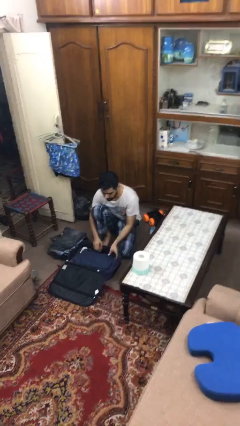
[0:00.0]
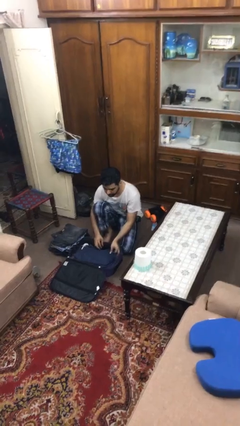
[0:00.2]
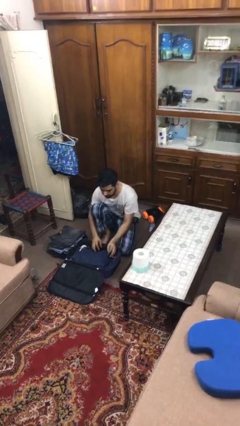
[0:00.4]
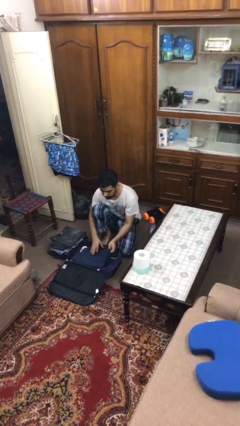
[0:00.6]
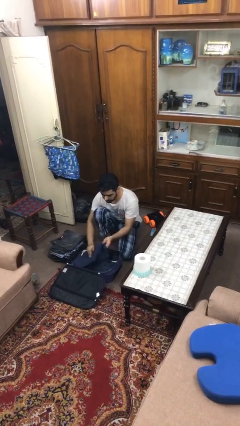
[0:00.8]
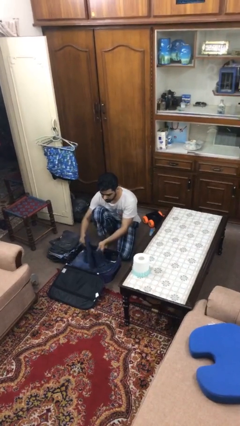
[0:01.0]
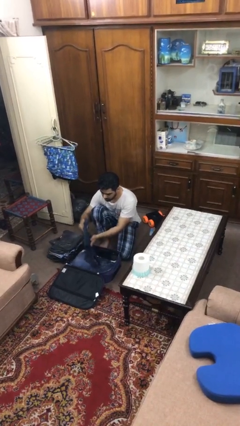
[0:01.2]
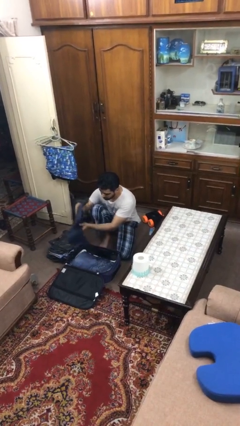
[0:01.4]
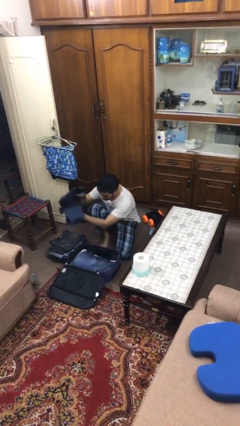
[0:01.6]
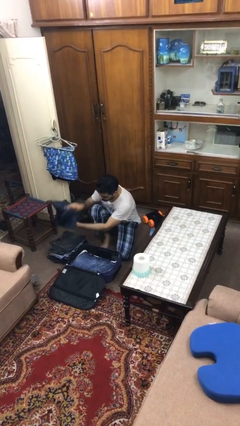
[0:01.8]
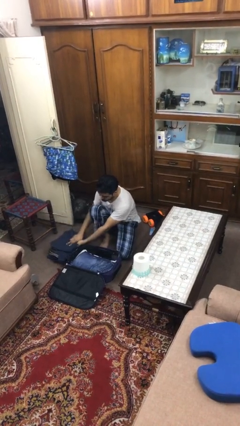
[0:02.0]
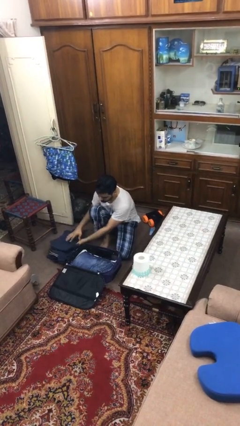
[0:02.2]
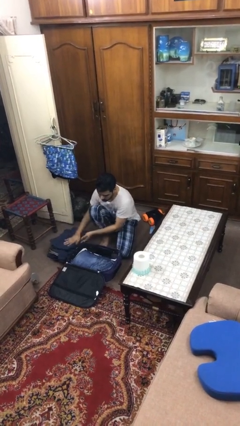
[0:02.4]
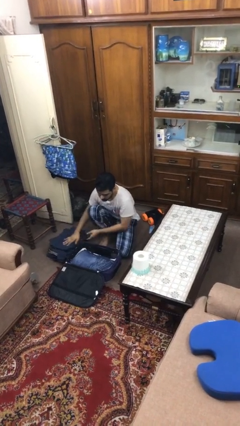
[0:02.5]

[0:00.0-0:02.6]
person unloads clothes from suitcase

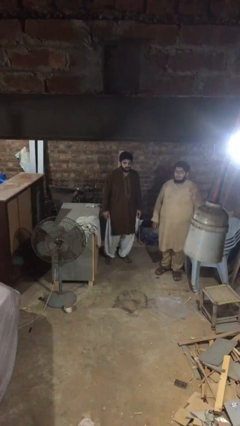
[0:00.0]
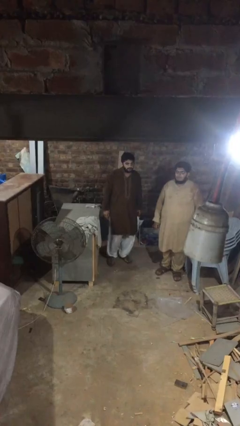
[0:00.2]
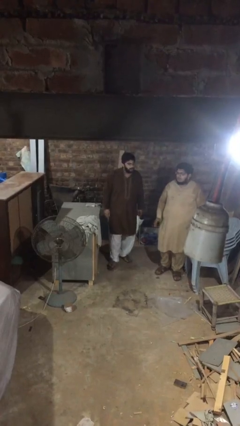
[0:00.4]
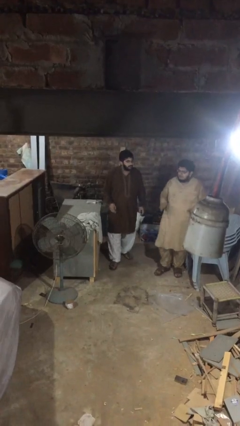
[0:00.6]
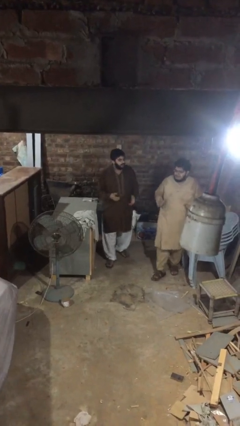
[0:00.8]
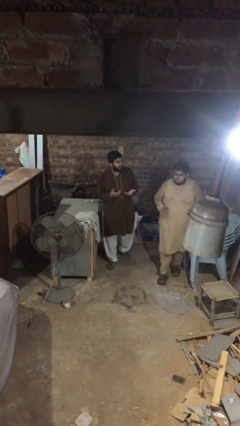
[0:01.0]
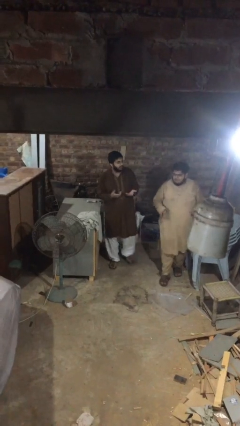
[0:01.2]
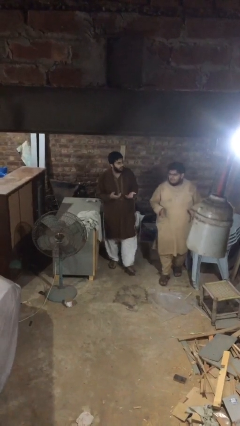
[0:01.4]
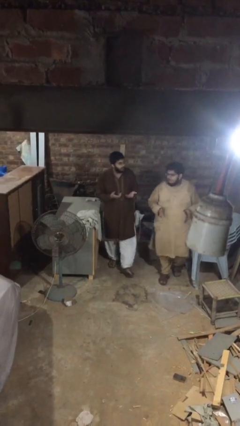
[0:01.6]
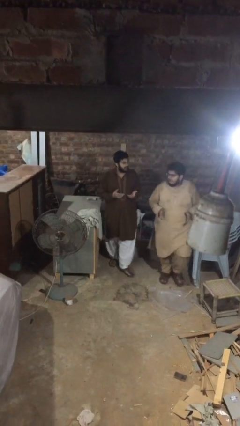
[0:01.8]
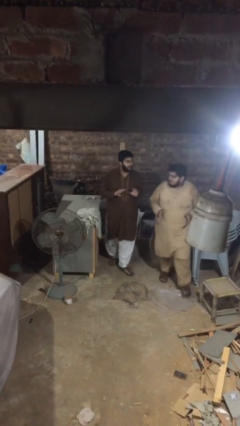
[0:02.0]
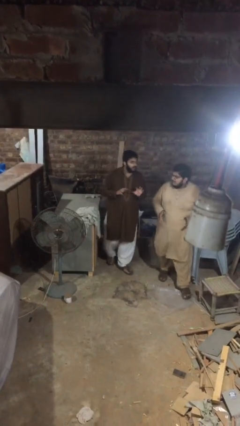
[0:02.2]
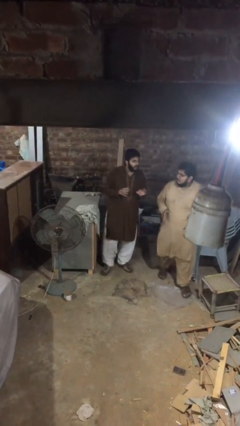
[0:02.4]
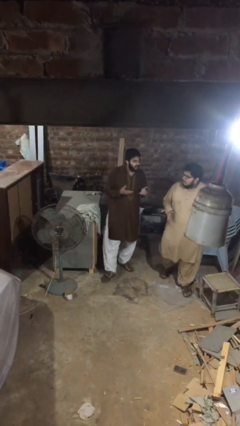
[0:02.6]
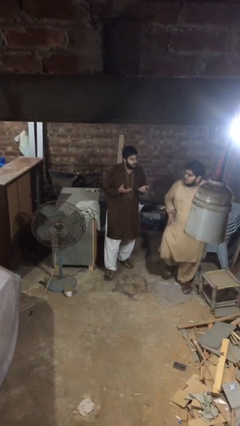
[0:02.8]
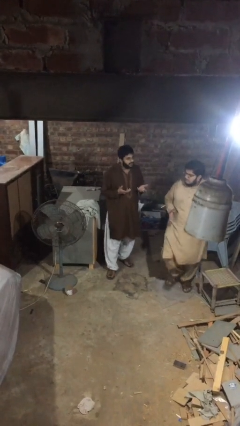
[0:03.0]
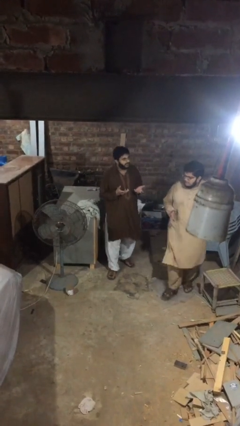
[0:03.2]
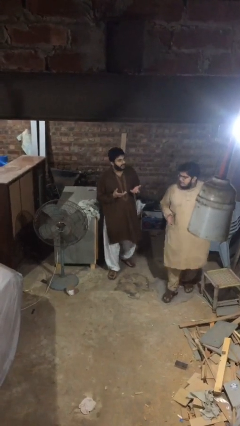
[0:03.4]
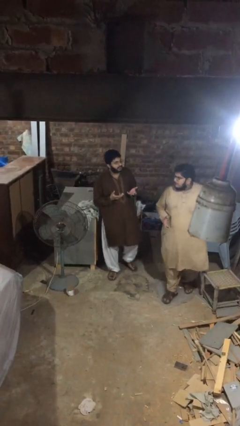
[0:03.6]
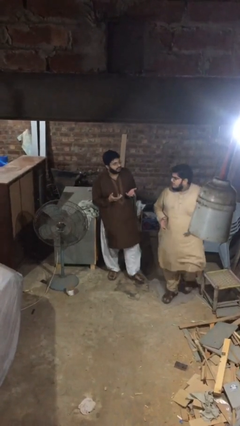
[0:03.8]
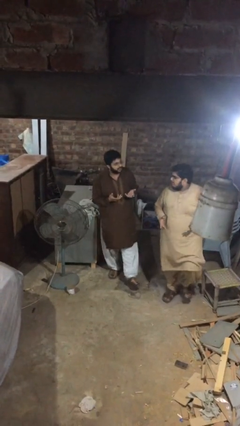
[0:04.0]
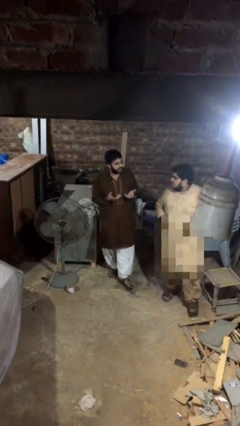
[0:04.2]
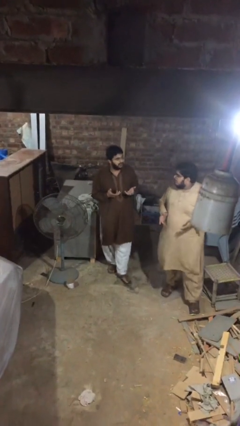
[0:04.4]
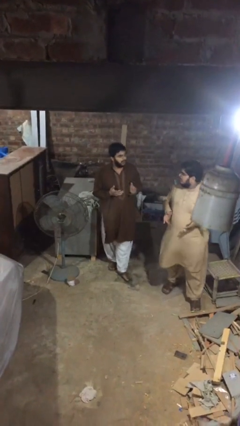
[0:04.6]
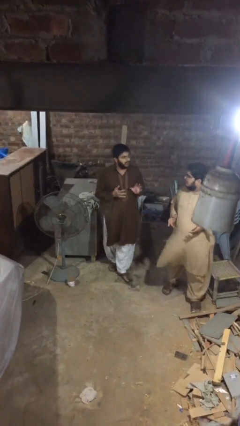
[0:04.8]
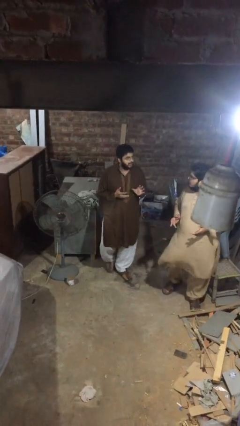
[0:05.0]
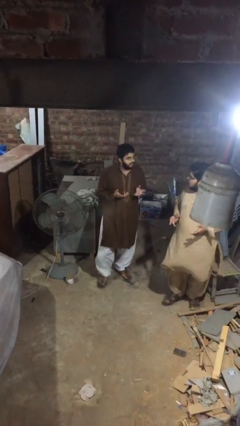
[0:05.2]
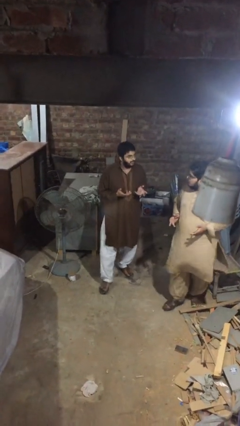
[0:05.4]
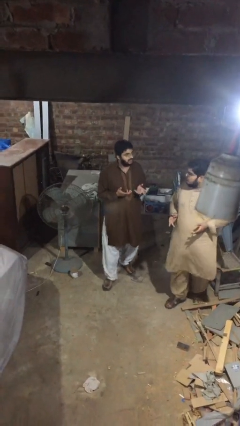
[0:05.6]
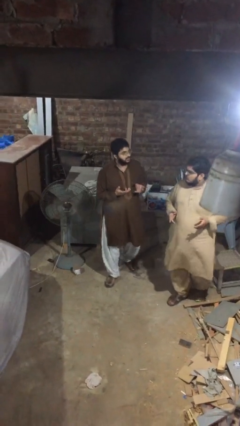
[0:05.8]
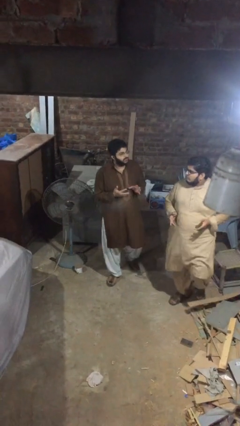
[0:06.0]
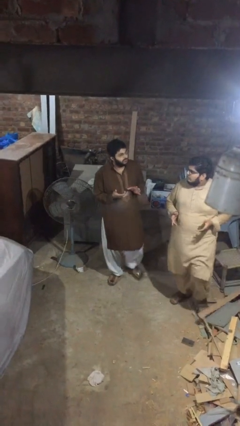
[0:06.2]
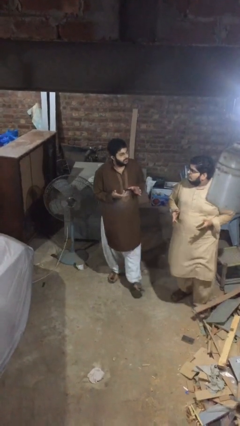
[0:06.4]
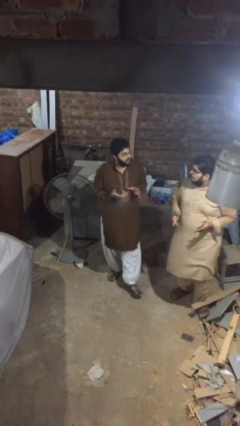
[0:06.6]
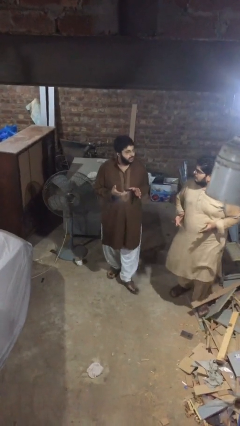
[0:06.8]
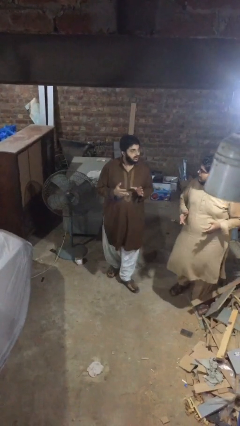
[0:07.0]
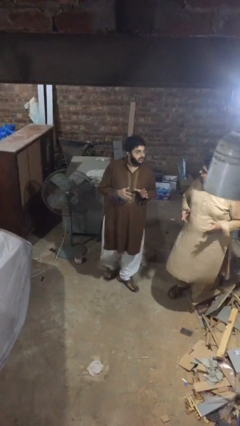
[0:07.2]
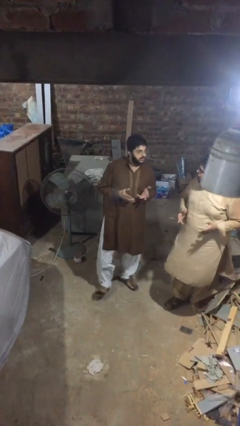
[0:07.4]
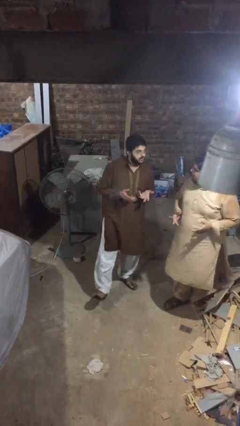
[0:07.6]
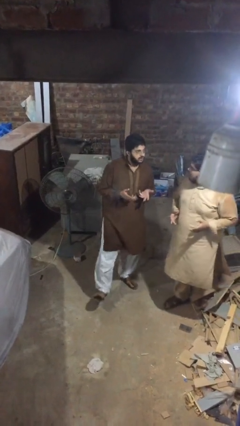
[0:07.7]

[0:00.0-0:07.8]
person talks to person

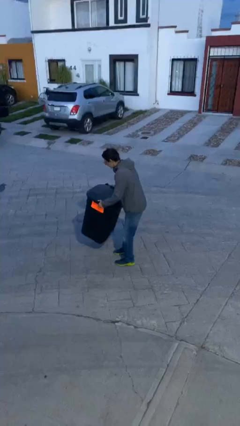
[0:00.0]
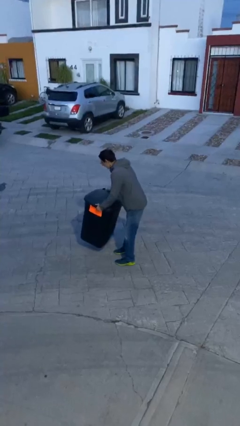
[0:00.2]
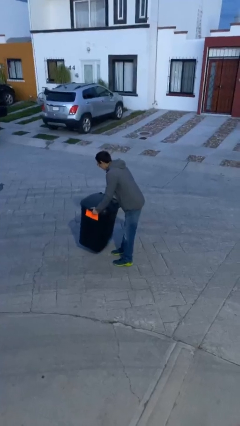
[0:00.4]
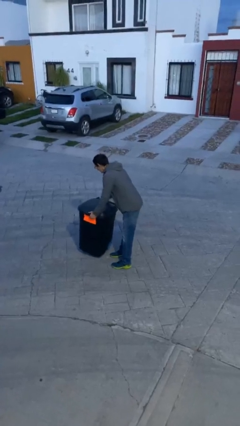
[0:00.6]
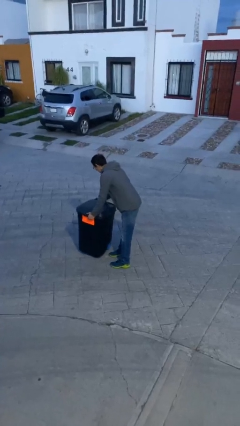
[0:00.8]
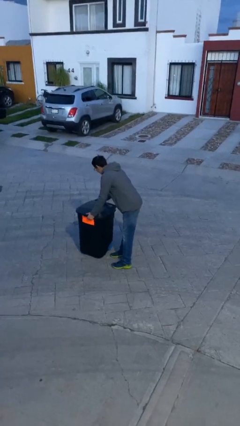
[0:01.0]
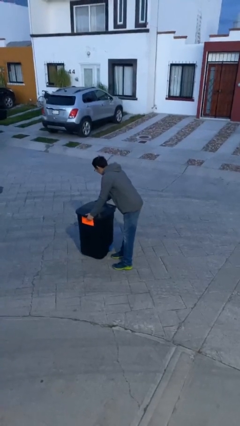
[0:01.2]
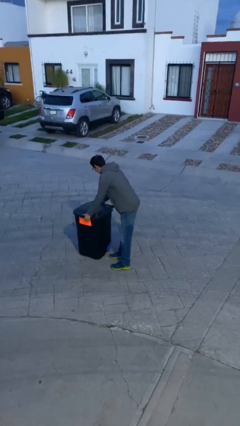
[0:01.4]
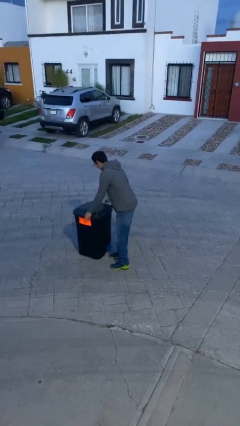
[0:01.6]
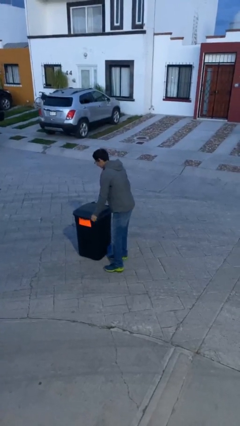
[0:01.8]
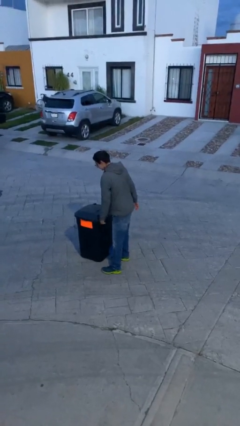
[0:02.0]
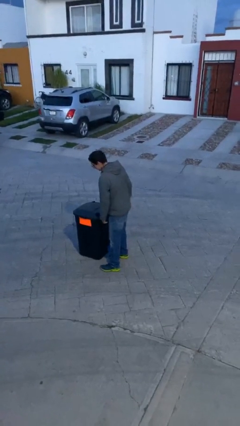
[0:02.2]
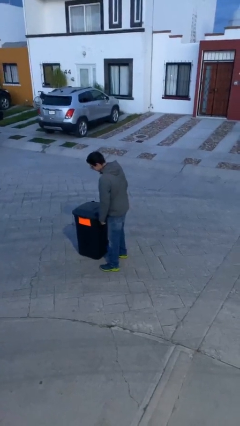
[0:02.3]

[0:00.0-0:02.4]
person puts down object on floor

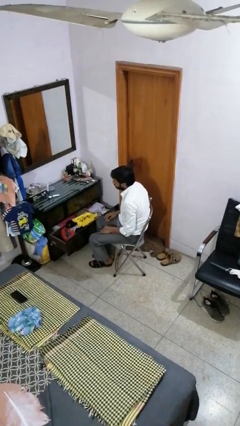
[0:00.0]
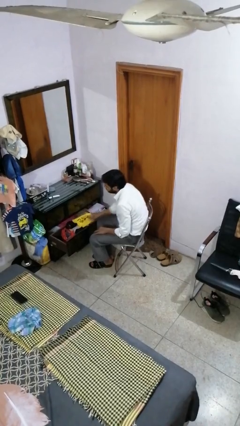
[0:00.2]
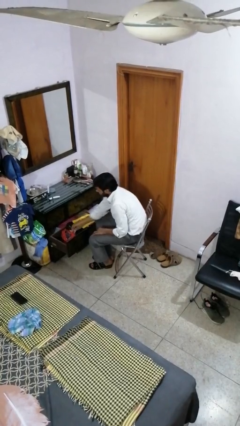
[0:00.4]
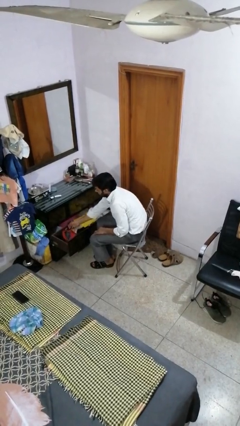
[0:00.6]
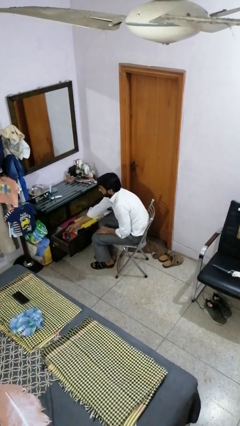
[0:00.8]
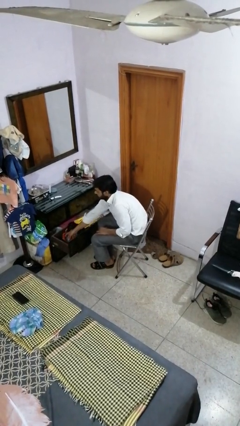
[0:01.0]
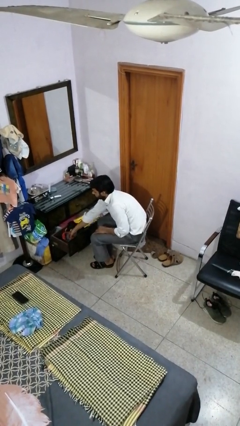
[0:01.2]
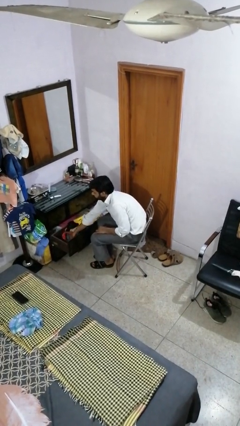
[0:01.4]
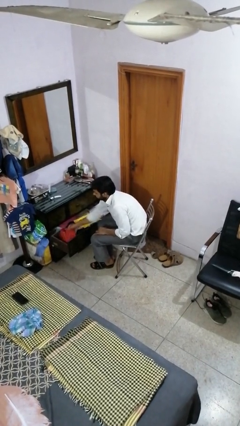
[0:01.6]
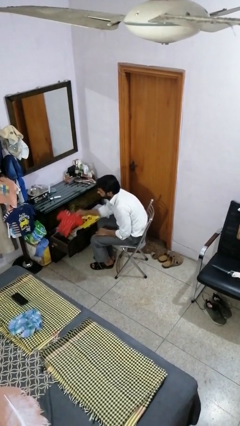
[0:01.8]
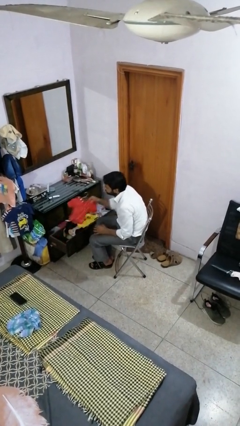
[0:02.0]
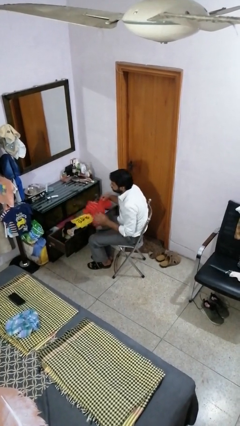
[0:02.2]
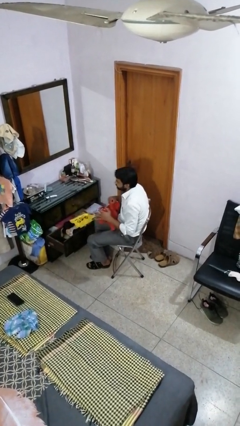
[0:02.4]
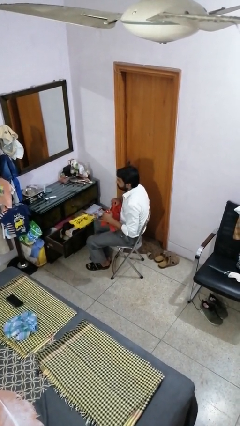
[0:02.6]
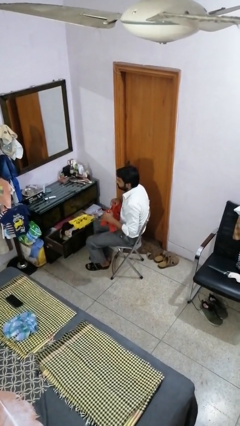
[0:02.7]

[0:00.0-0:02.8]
person takes clothes from dresser

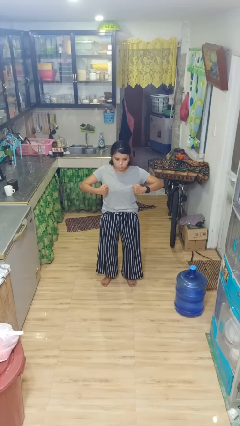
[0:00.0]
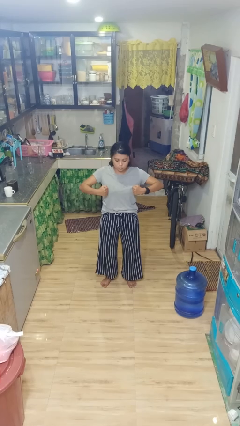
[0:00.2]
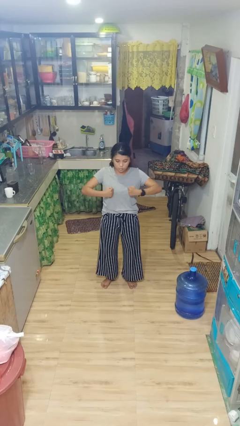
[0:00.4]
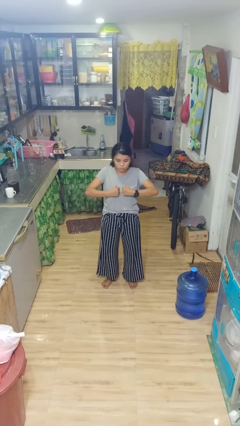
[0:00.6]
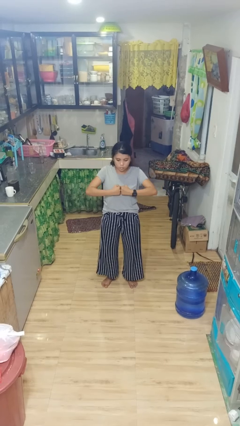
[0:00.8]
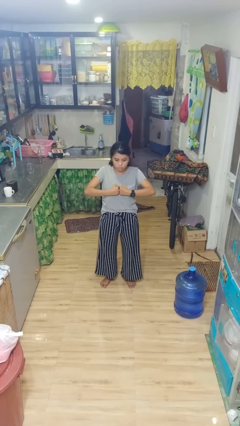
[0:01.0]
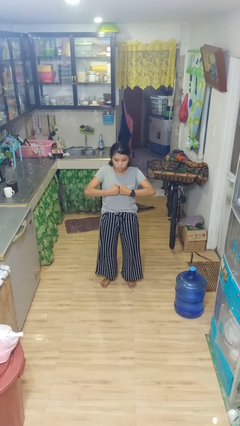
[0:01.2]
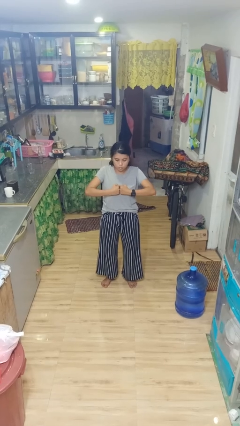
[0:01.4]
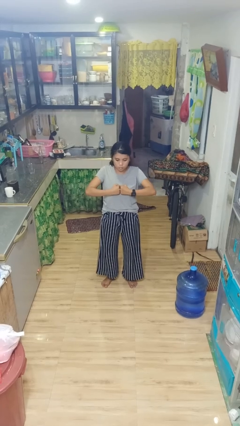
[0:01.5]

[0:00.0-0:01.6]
person gestures zoom out

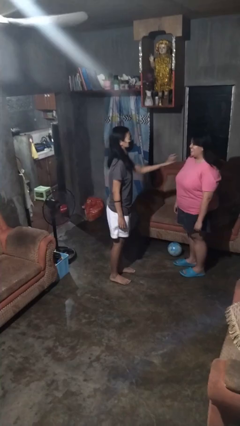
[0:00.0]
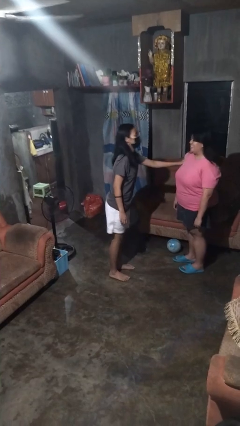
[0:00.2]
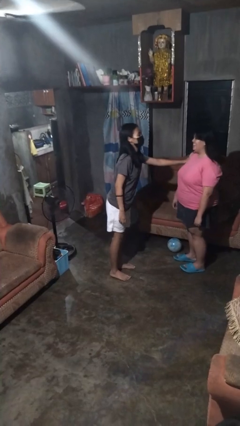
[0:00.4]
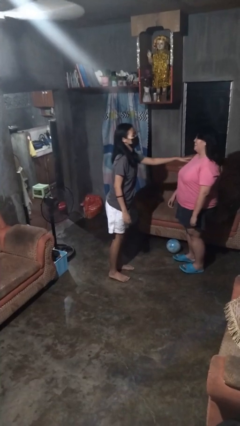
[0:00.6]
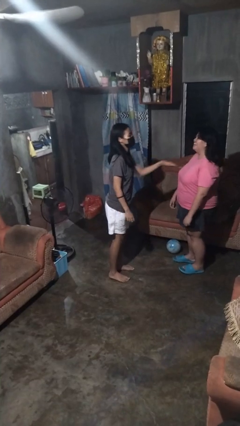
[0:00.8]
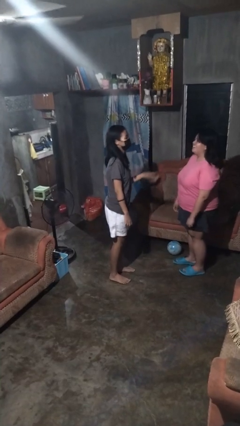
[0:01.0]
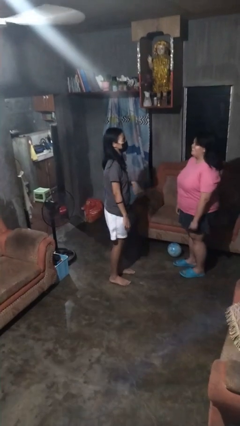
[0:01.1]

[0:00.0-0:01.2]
person shoves person
